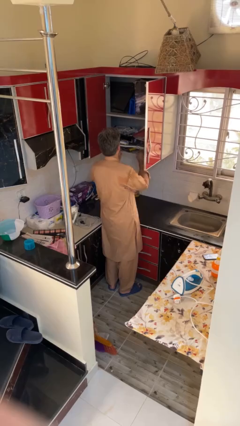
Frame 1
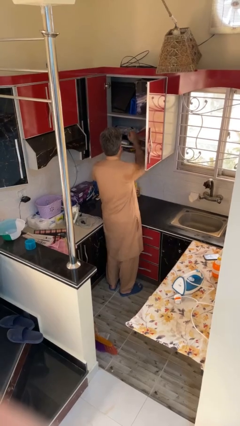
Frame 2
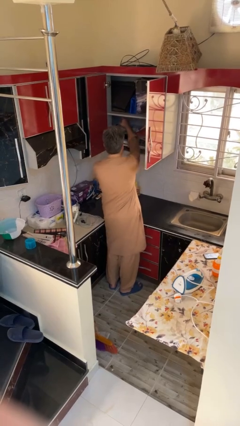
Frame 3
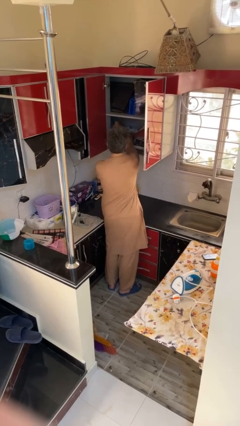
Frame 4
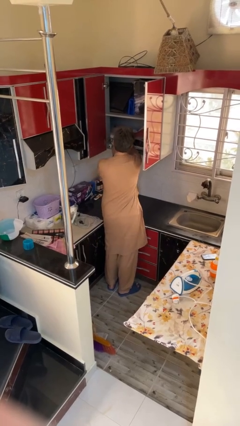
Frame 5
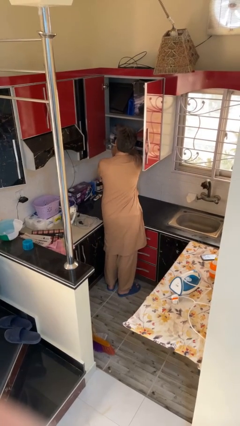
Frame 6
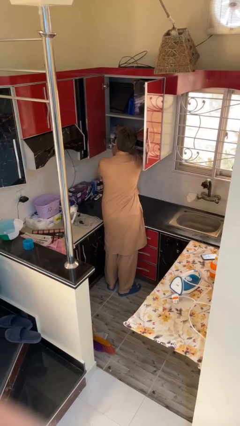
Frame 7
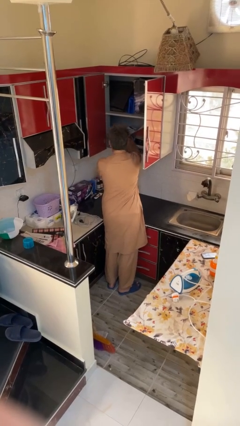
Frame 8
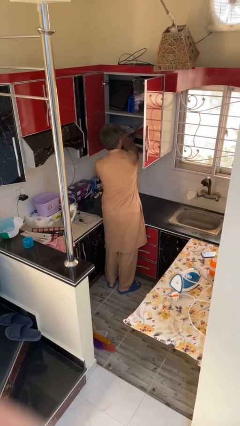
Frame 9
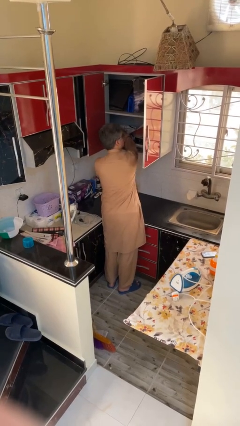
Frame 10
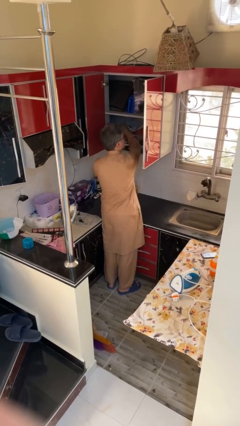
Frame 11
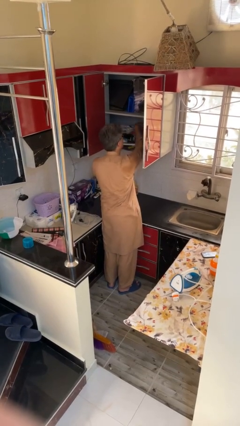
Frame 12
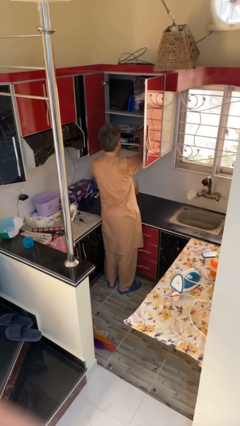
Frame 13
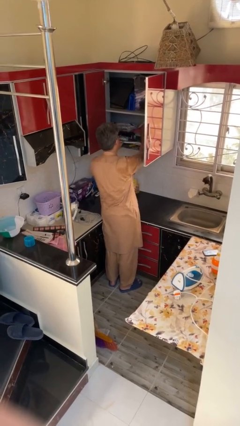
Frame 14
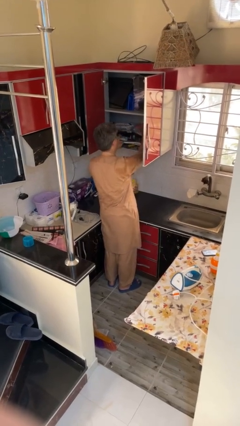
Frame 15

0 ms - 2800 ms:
person searches in cabinet

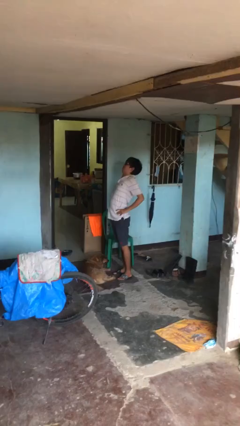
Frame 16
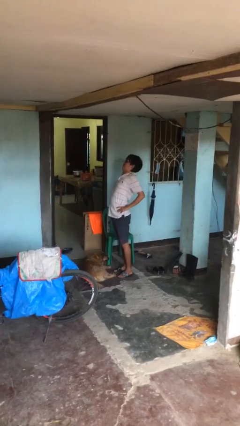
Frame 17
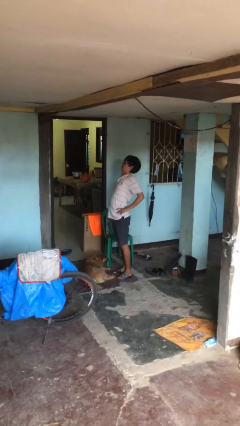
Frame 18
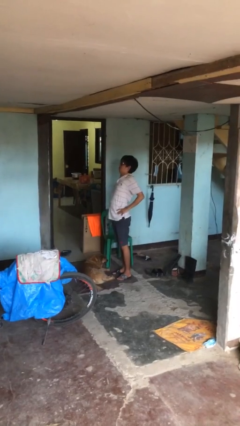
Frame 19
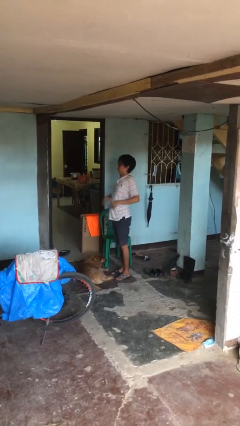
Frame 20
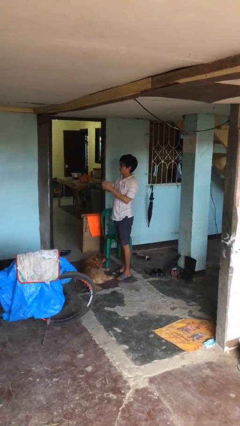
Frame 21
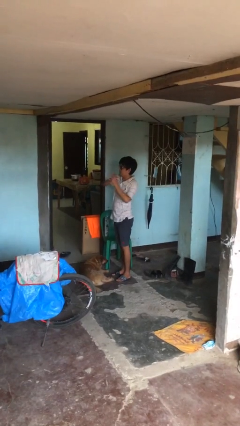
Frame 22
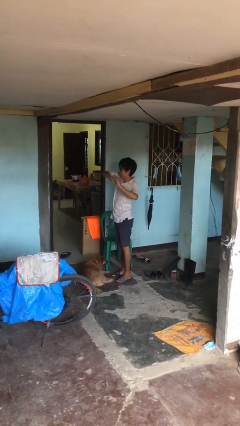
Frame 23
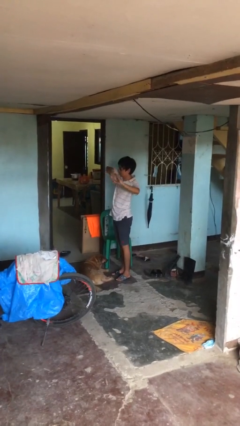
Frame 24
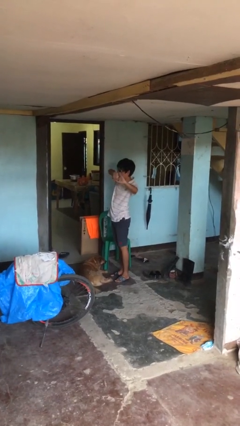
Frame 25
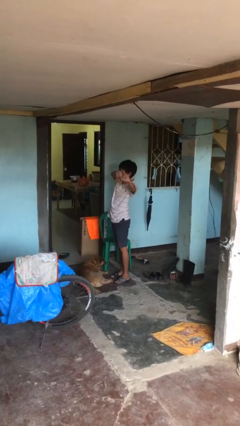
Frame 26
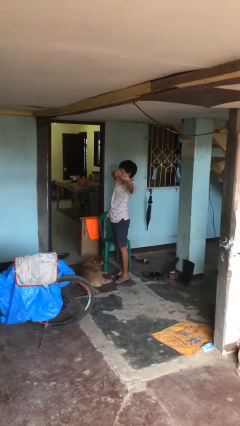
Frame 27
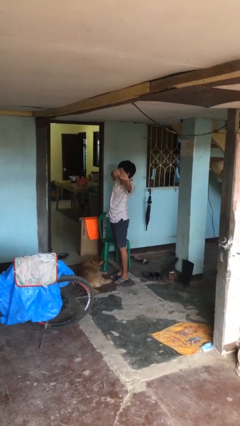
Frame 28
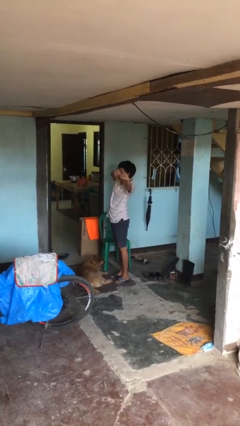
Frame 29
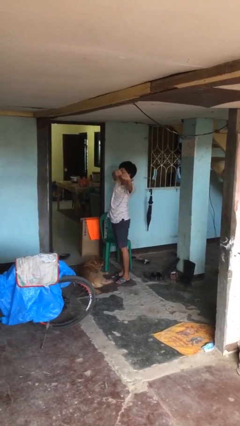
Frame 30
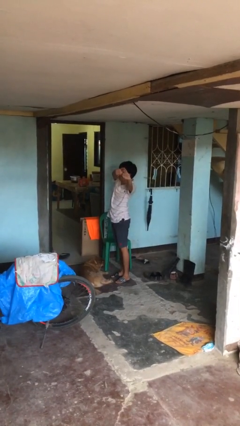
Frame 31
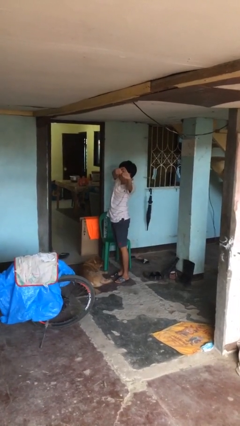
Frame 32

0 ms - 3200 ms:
person stretches arms to side

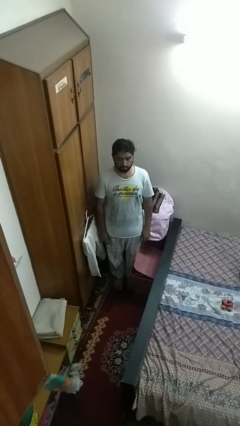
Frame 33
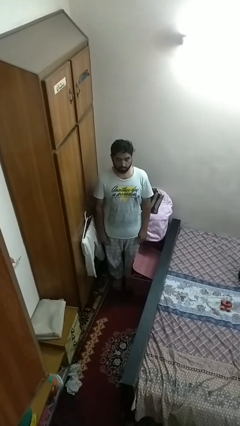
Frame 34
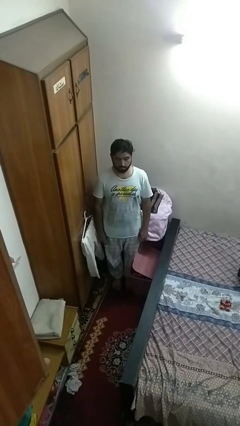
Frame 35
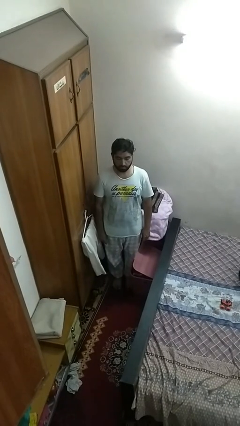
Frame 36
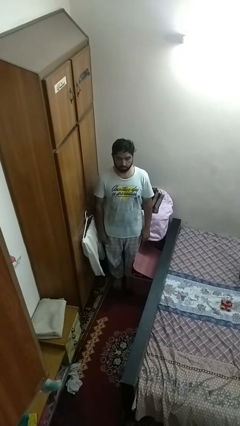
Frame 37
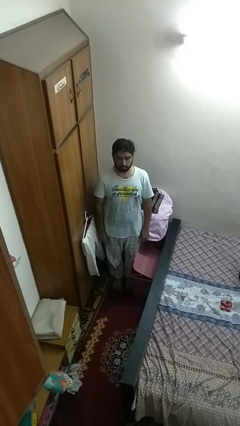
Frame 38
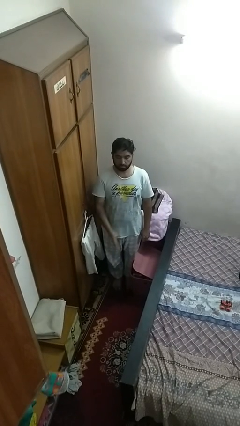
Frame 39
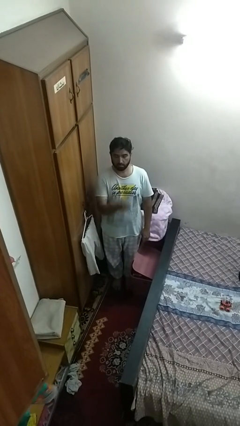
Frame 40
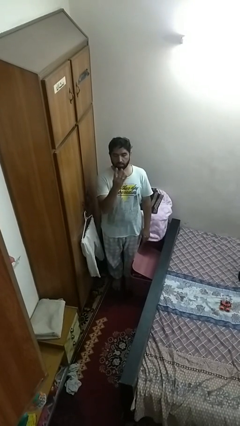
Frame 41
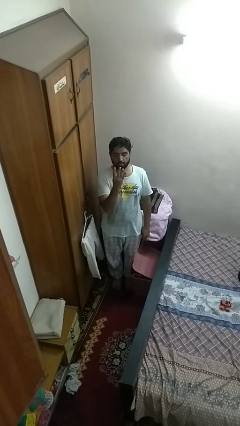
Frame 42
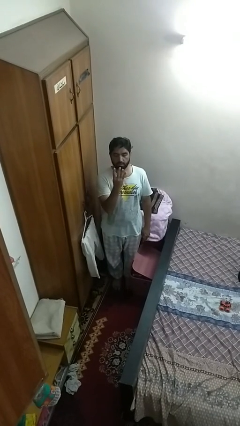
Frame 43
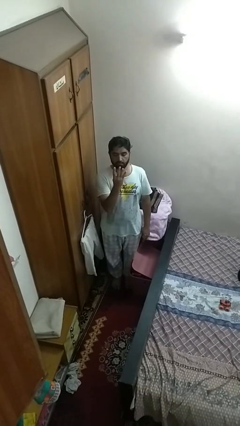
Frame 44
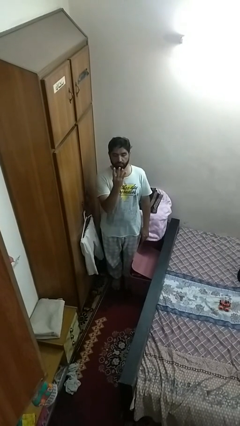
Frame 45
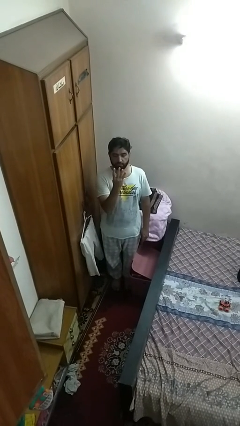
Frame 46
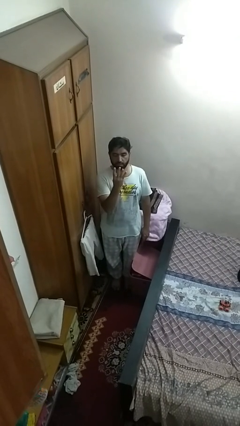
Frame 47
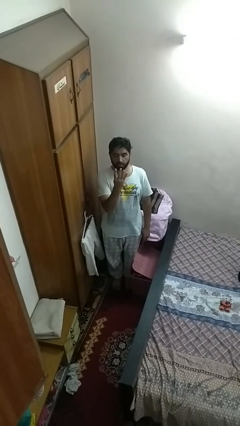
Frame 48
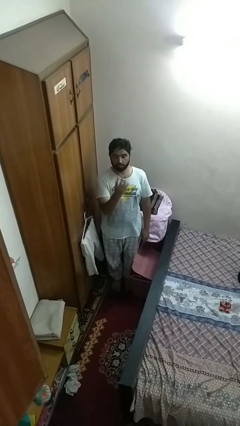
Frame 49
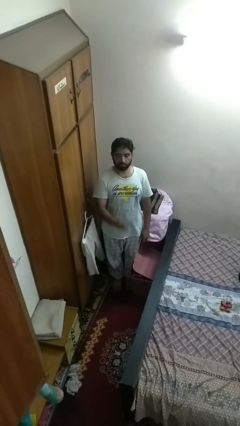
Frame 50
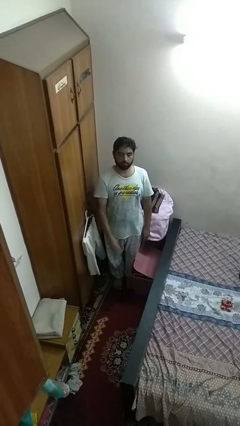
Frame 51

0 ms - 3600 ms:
person gestures number four

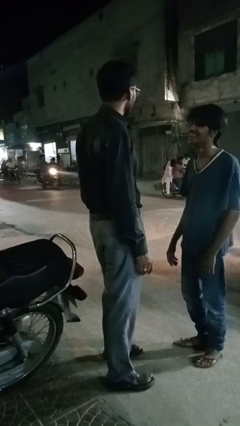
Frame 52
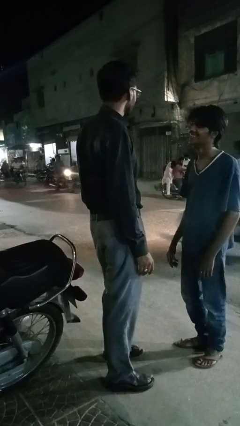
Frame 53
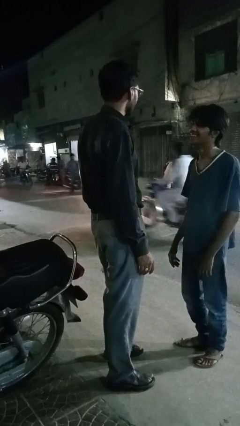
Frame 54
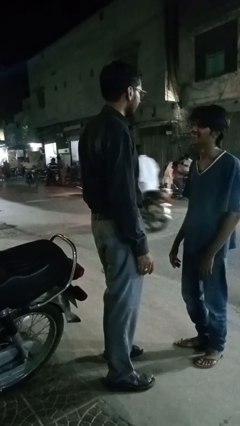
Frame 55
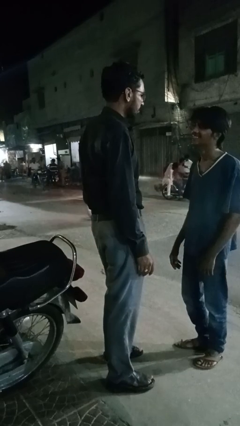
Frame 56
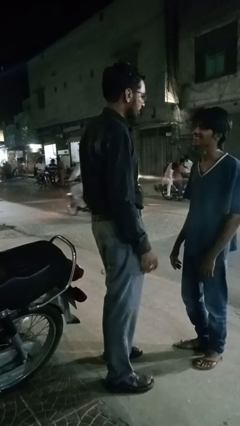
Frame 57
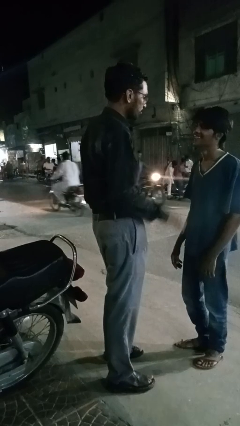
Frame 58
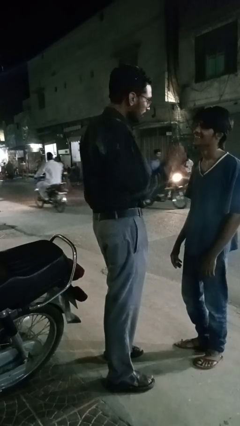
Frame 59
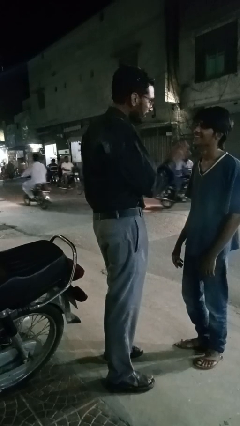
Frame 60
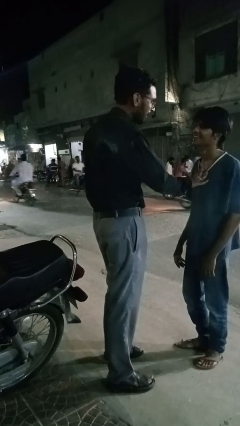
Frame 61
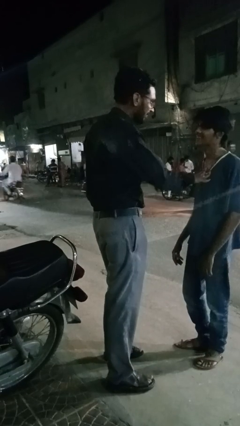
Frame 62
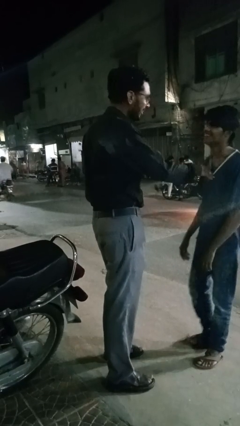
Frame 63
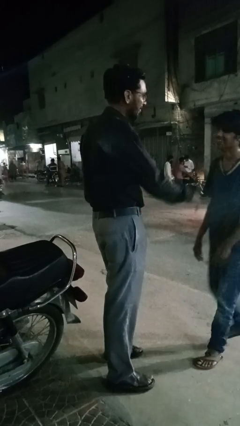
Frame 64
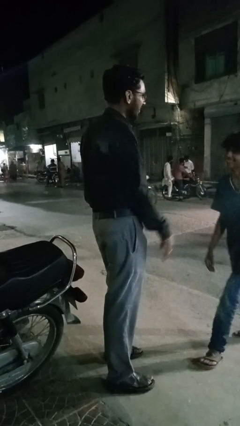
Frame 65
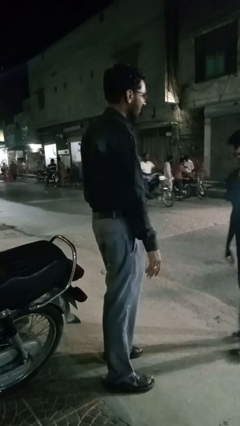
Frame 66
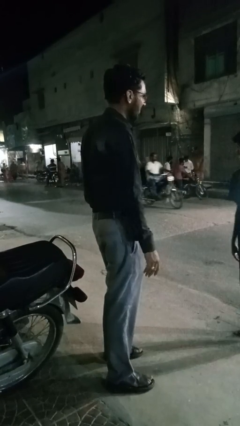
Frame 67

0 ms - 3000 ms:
person shoves person

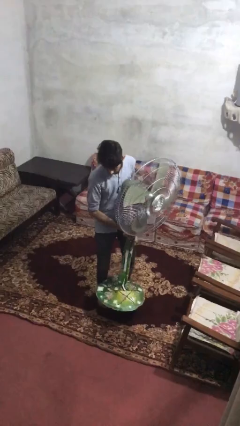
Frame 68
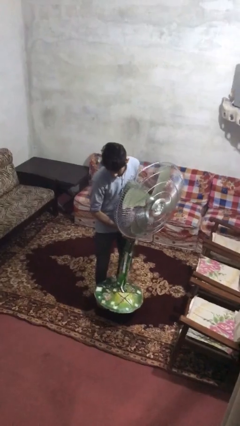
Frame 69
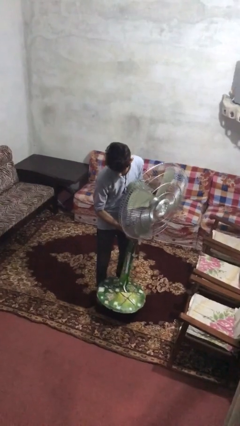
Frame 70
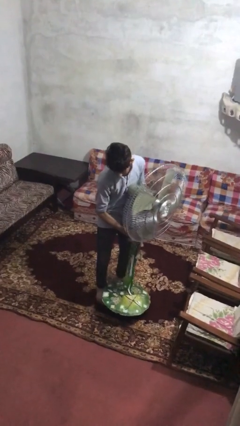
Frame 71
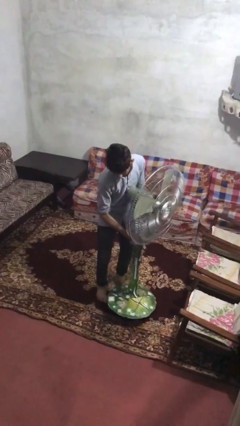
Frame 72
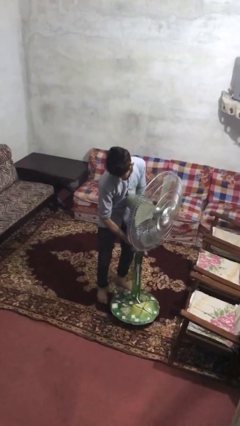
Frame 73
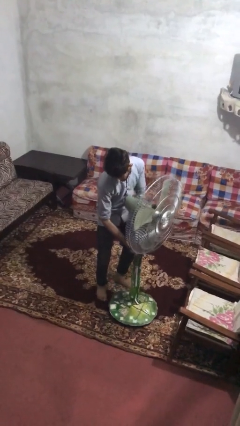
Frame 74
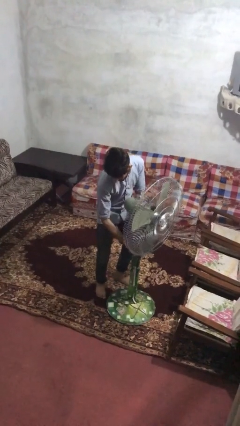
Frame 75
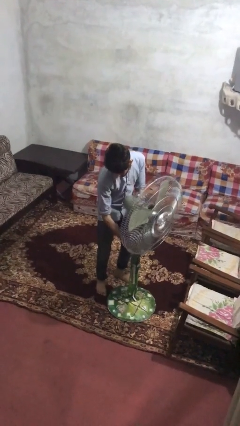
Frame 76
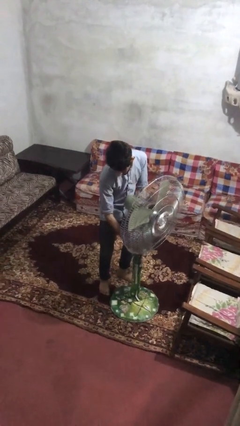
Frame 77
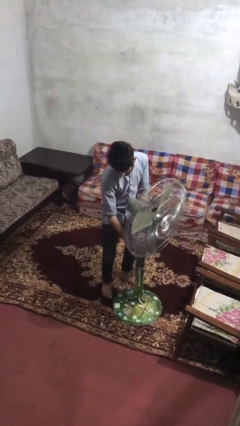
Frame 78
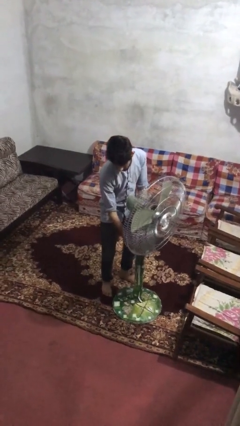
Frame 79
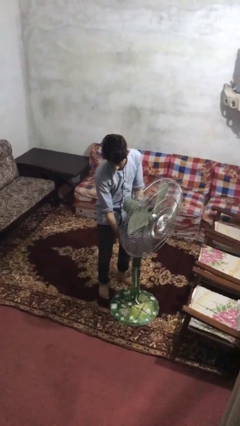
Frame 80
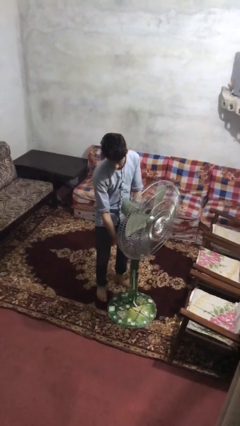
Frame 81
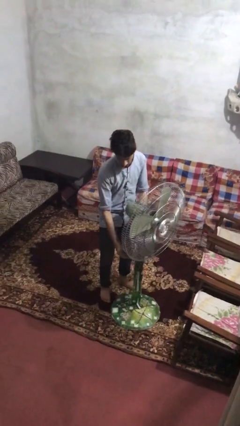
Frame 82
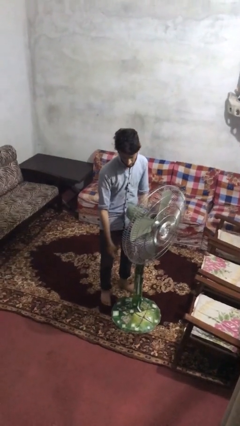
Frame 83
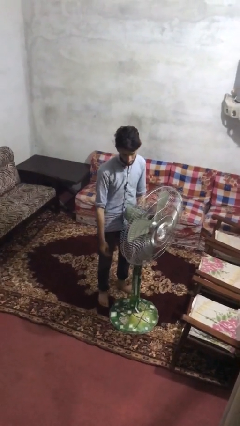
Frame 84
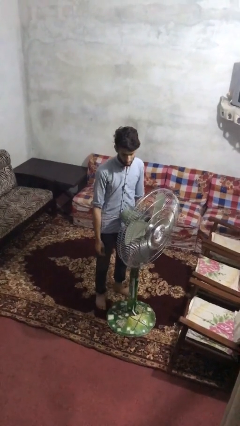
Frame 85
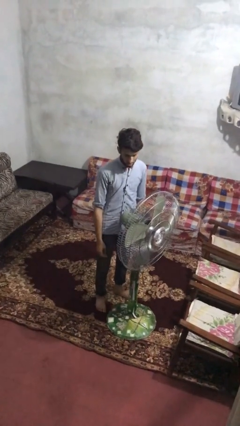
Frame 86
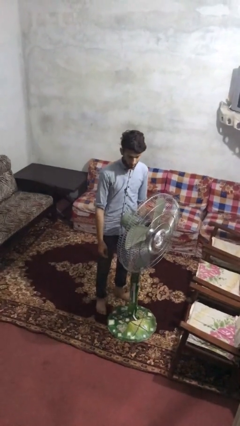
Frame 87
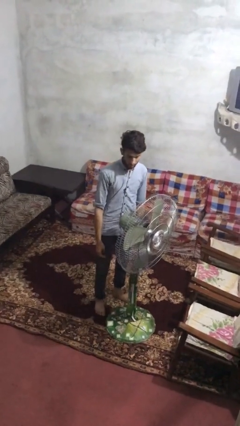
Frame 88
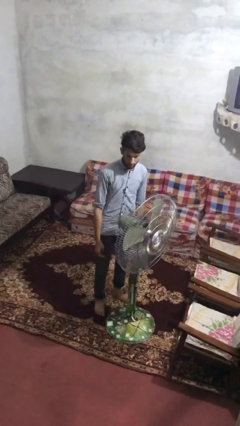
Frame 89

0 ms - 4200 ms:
person puts down object on floor

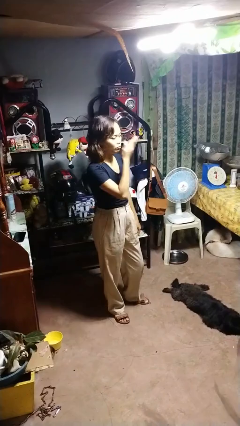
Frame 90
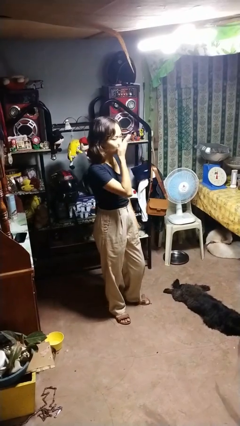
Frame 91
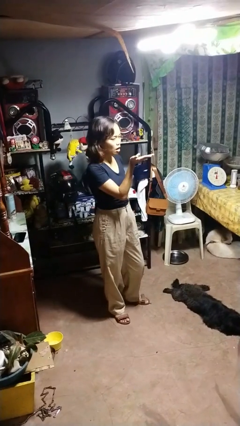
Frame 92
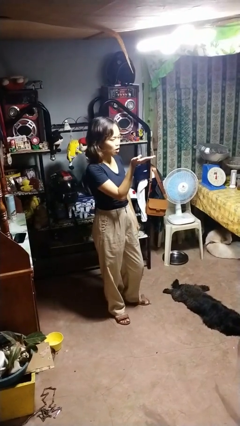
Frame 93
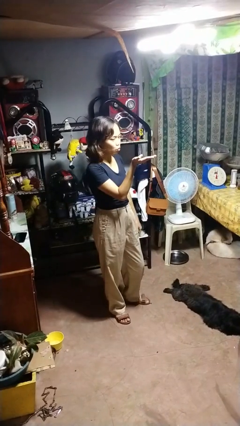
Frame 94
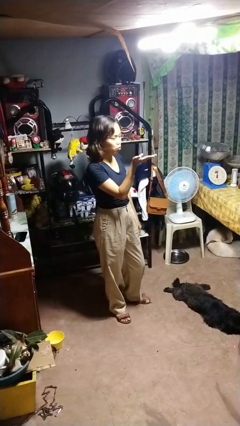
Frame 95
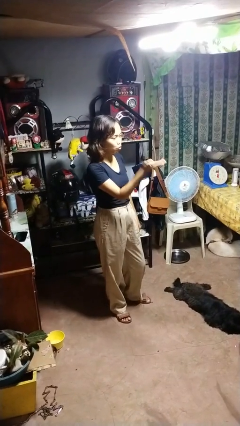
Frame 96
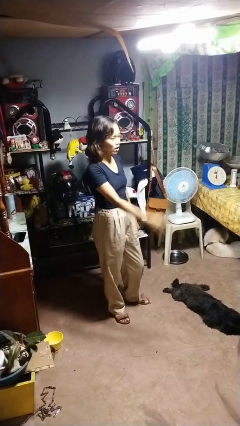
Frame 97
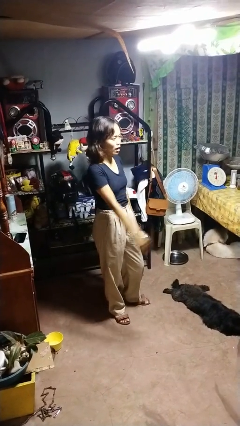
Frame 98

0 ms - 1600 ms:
person gestures blow kiss
